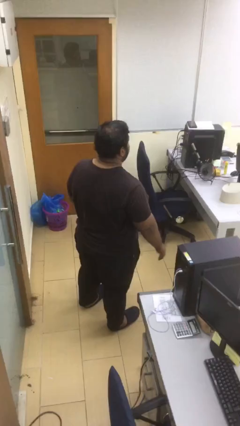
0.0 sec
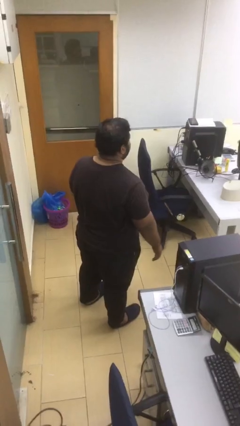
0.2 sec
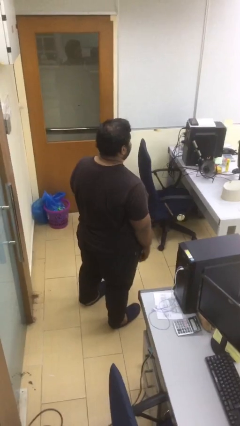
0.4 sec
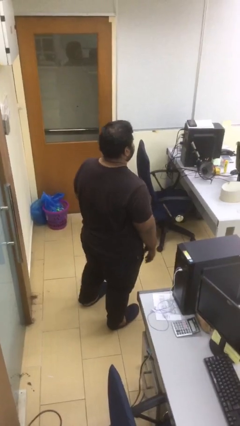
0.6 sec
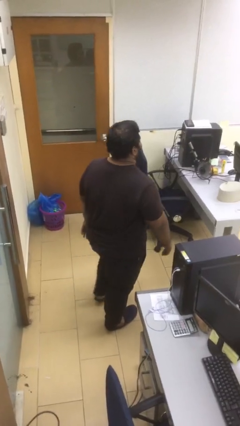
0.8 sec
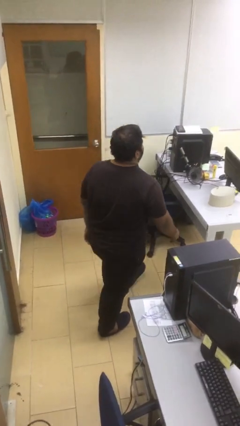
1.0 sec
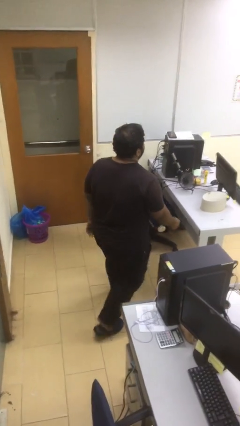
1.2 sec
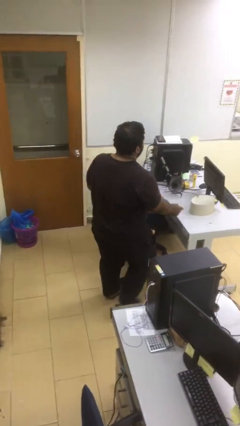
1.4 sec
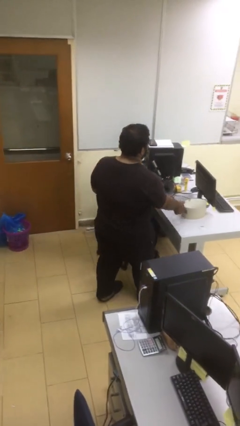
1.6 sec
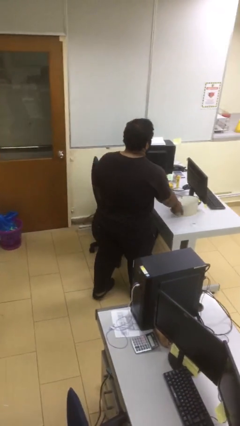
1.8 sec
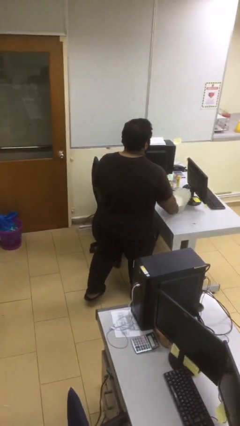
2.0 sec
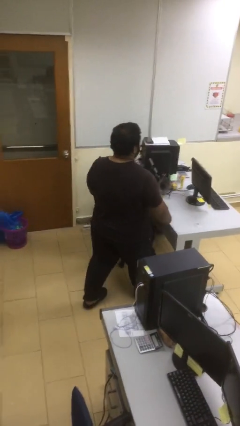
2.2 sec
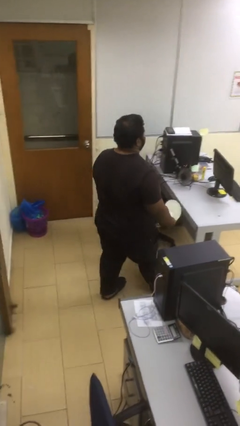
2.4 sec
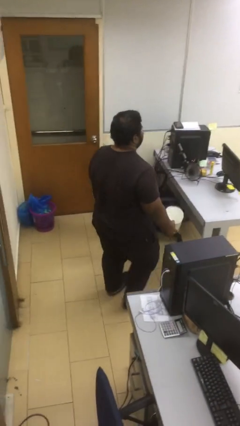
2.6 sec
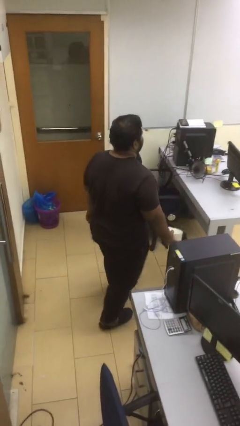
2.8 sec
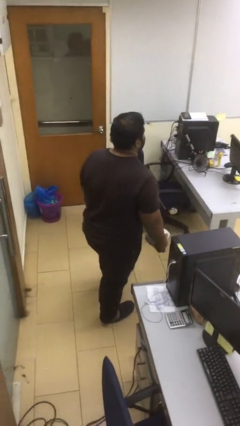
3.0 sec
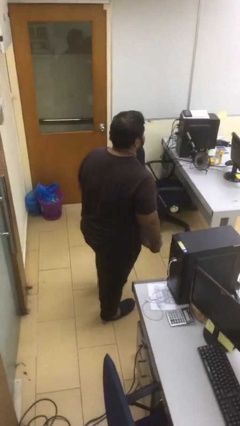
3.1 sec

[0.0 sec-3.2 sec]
person picks up object from table

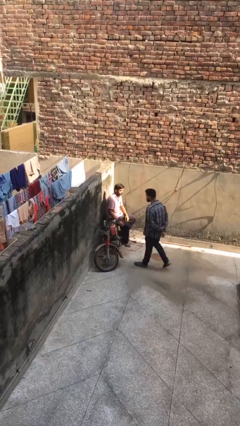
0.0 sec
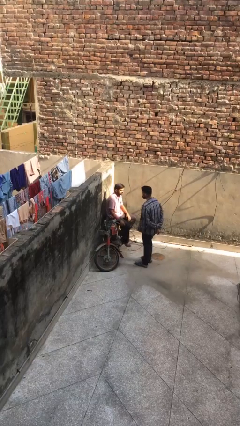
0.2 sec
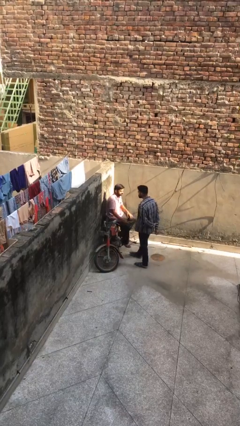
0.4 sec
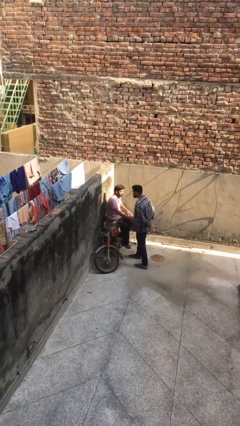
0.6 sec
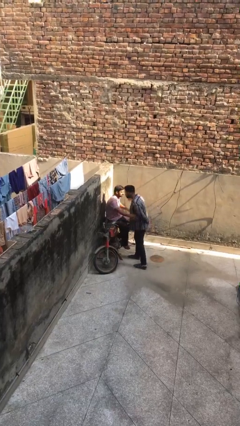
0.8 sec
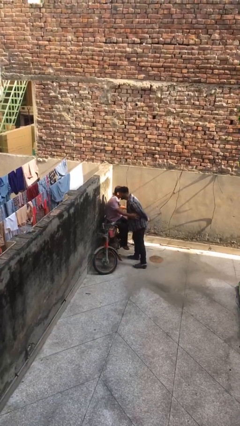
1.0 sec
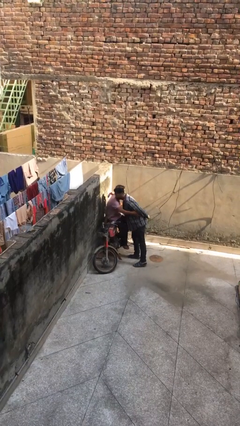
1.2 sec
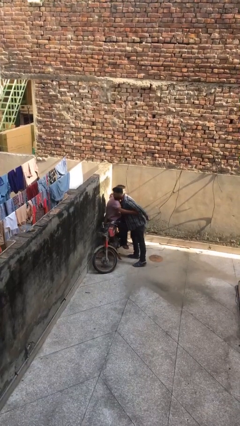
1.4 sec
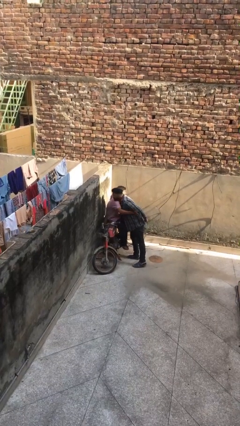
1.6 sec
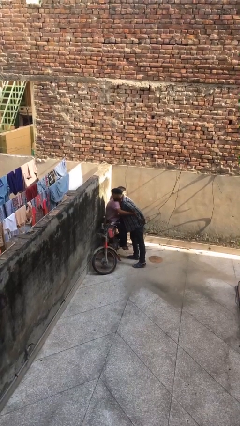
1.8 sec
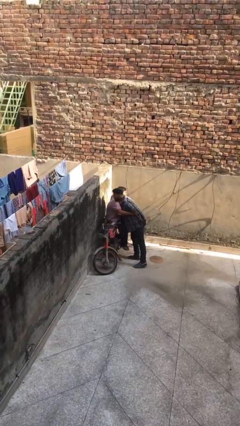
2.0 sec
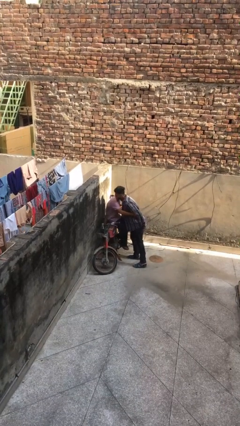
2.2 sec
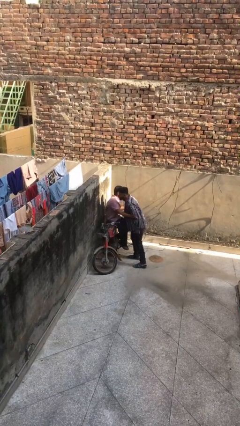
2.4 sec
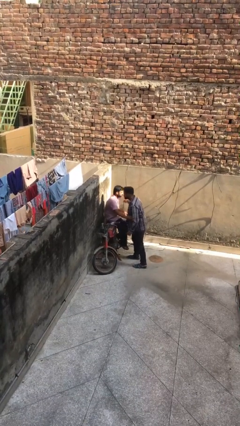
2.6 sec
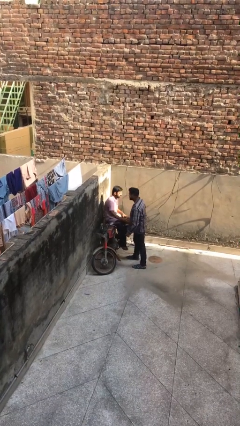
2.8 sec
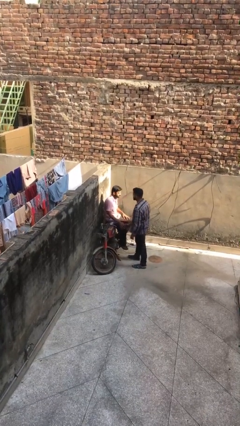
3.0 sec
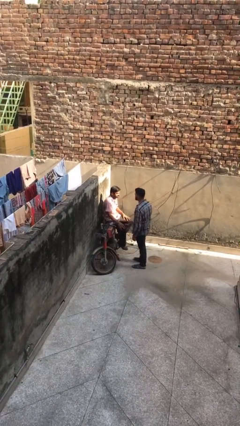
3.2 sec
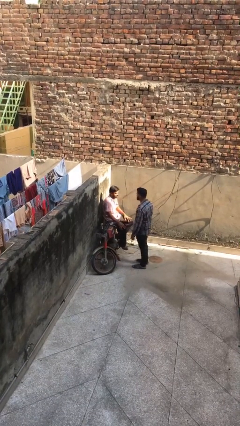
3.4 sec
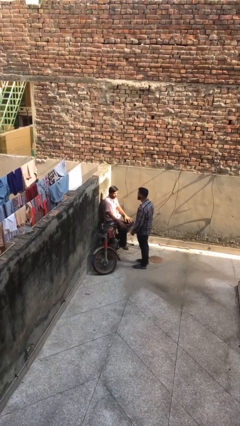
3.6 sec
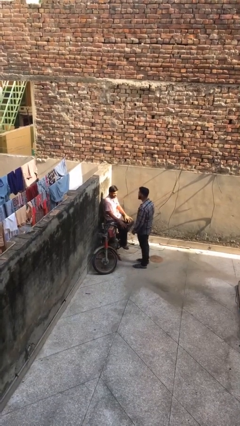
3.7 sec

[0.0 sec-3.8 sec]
person embraces person

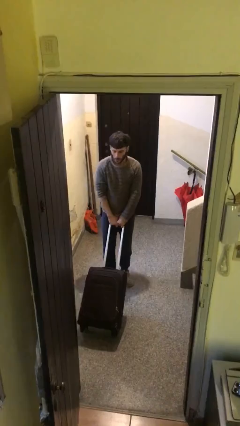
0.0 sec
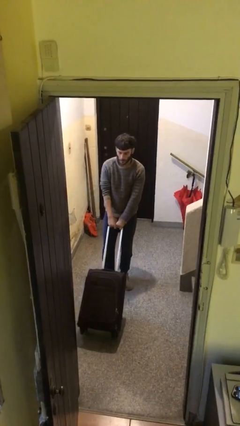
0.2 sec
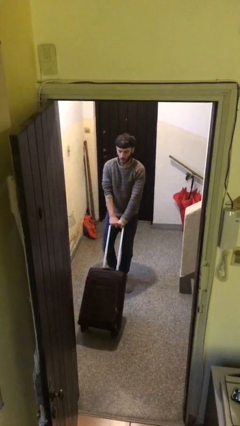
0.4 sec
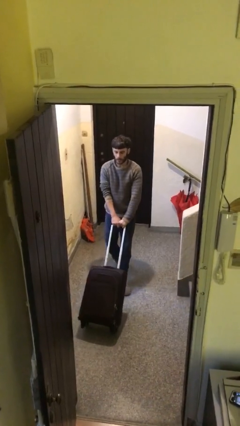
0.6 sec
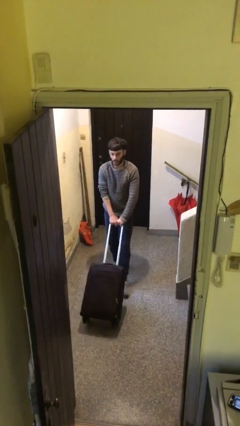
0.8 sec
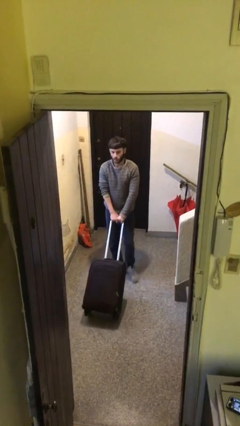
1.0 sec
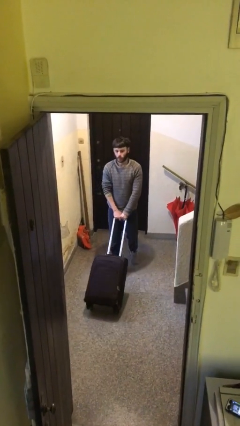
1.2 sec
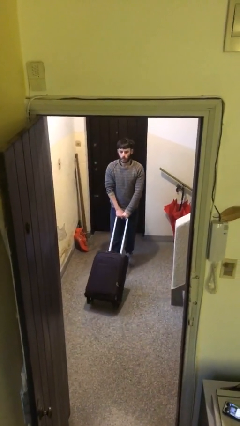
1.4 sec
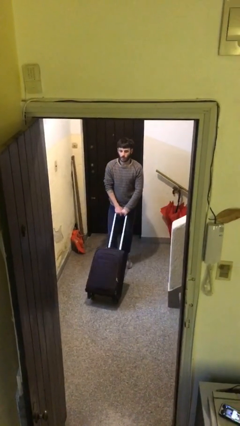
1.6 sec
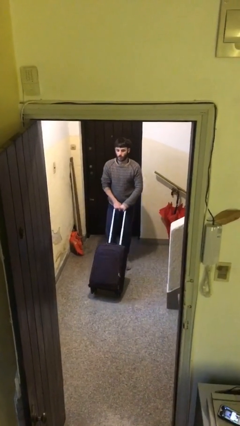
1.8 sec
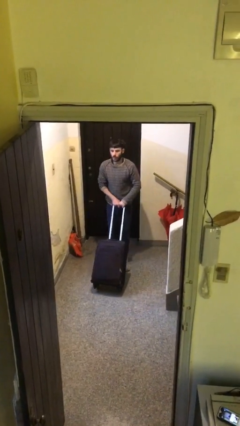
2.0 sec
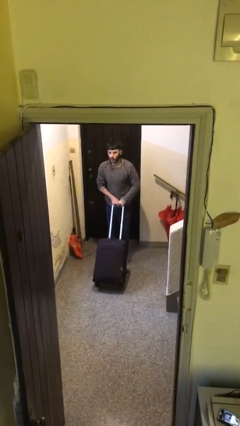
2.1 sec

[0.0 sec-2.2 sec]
person pulls wheeled cart

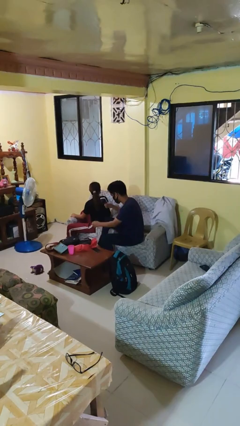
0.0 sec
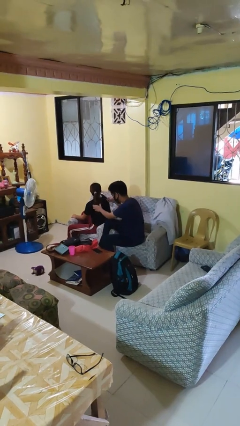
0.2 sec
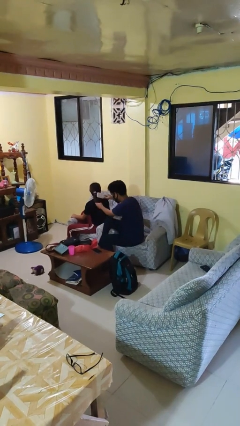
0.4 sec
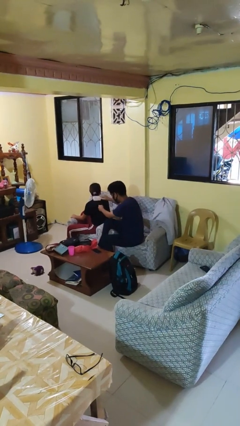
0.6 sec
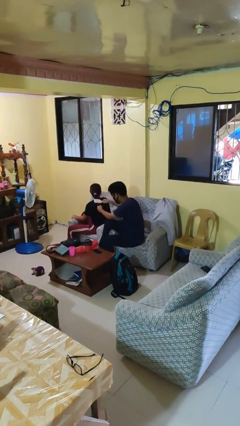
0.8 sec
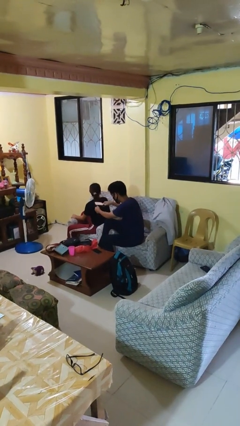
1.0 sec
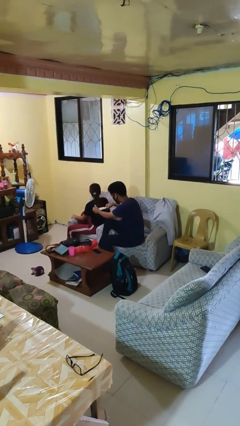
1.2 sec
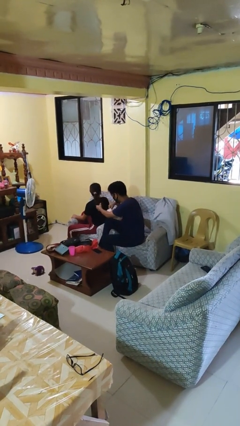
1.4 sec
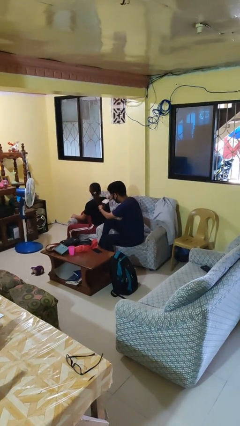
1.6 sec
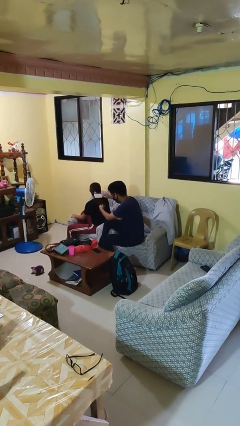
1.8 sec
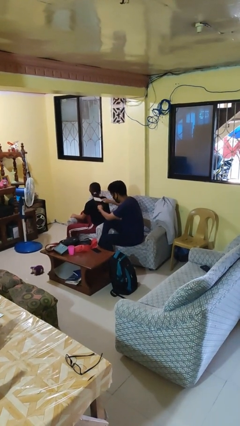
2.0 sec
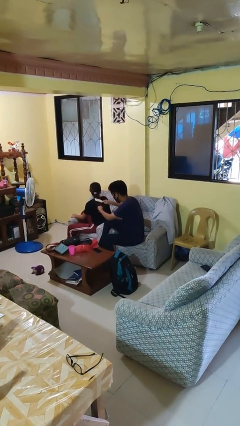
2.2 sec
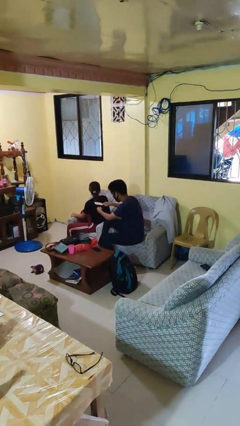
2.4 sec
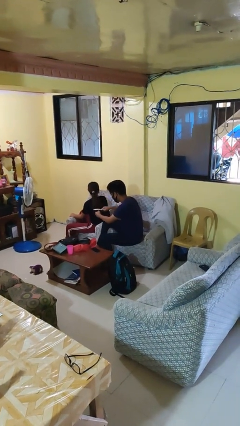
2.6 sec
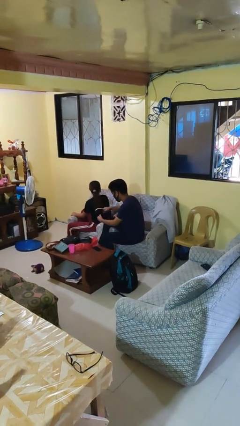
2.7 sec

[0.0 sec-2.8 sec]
person brushes hair of person

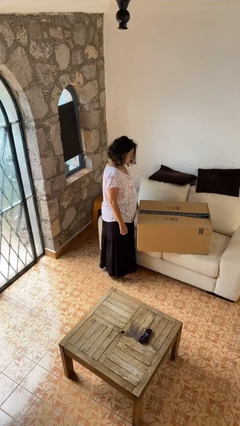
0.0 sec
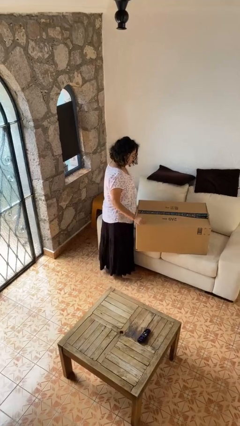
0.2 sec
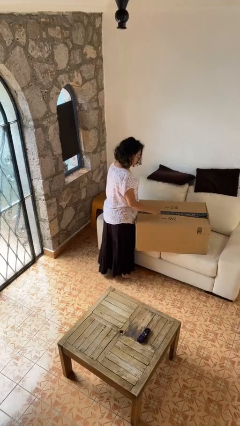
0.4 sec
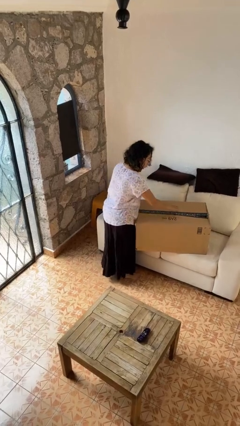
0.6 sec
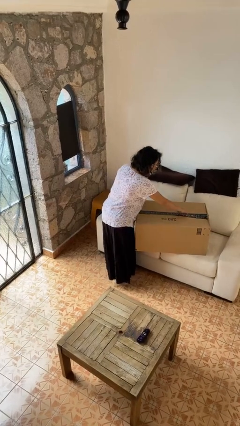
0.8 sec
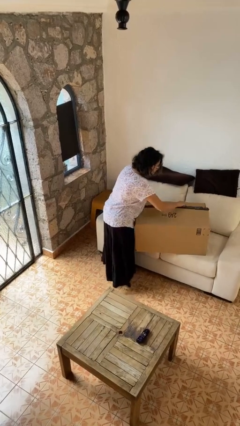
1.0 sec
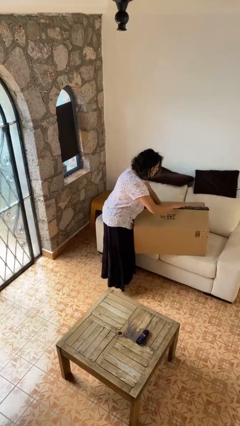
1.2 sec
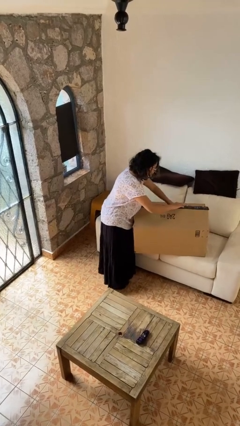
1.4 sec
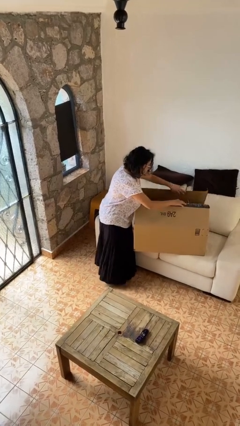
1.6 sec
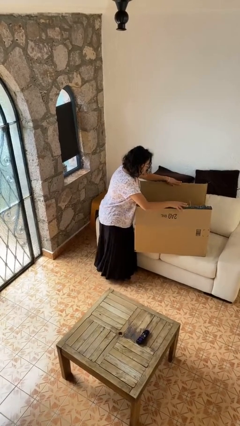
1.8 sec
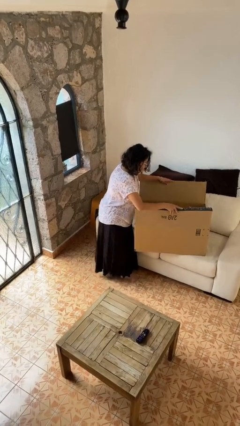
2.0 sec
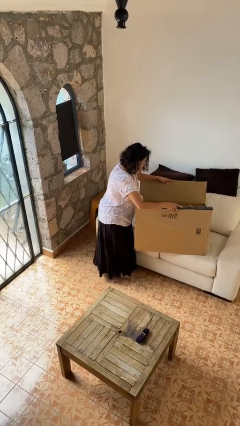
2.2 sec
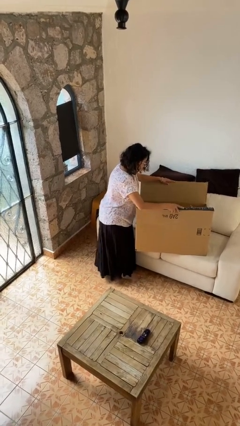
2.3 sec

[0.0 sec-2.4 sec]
person opens box

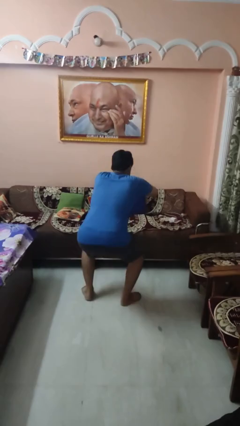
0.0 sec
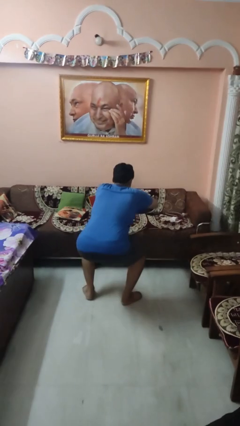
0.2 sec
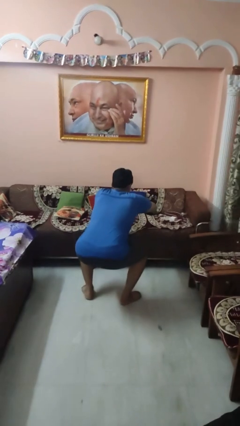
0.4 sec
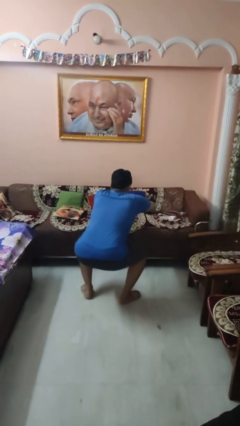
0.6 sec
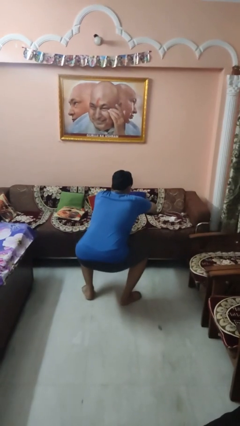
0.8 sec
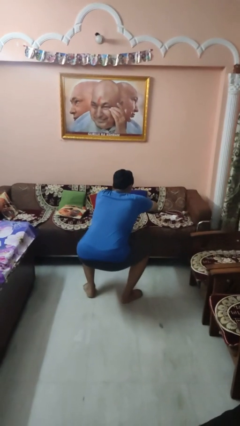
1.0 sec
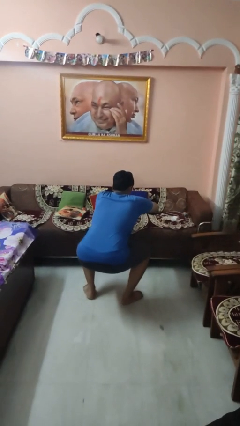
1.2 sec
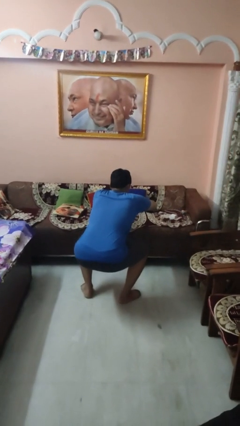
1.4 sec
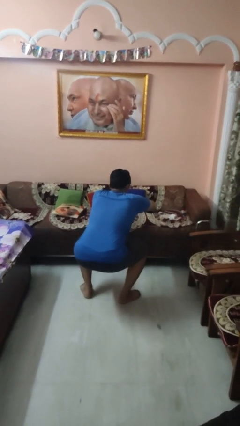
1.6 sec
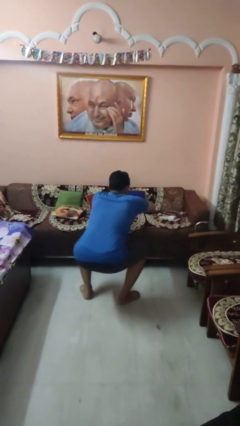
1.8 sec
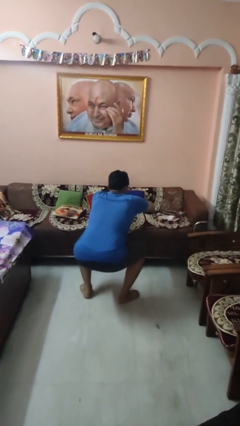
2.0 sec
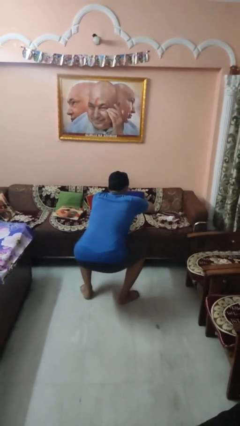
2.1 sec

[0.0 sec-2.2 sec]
person squats

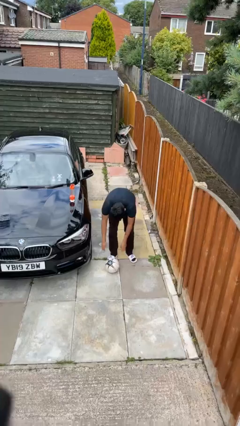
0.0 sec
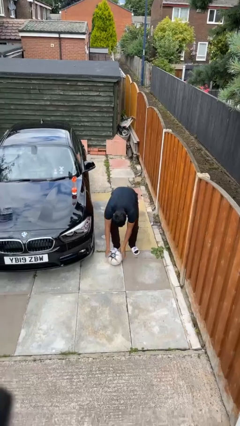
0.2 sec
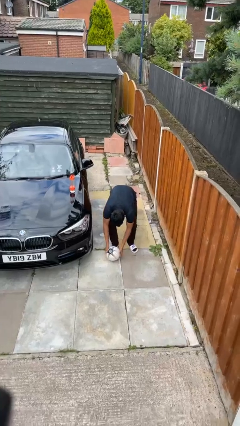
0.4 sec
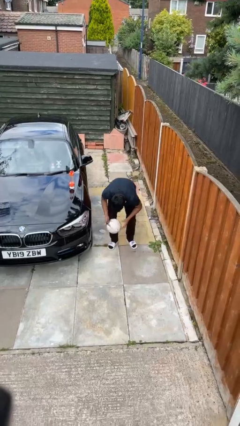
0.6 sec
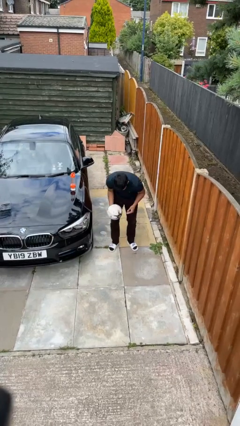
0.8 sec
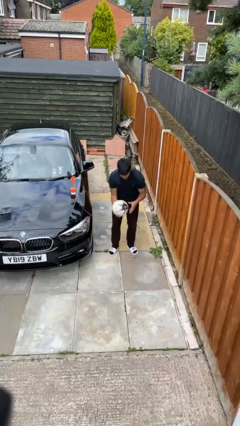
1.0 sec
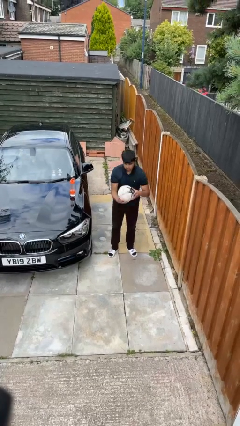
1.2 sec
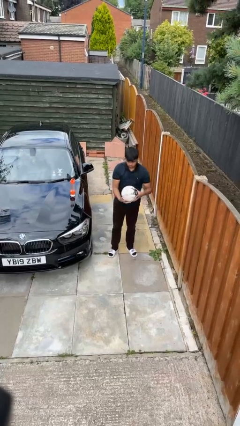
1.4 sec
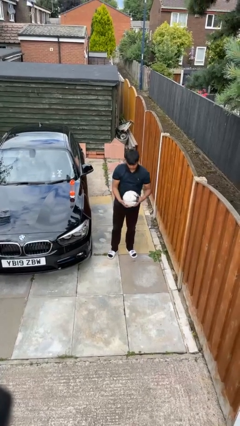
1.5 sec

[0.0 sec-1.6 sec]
person picks up object from floor
